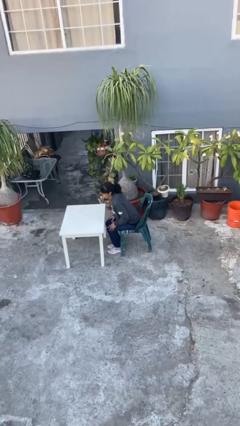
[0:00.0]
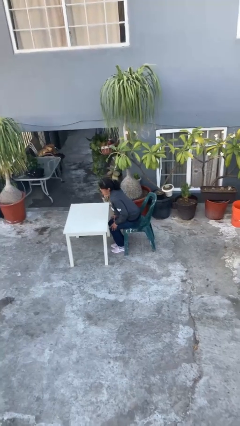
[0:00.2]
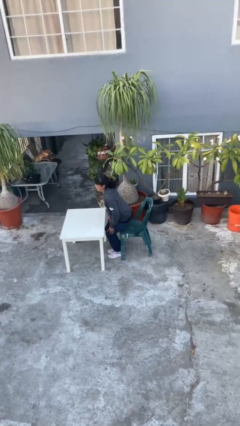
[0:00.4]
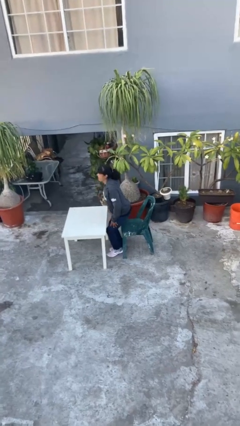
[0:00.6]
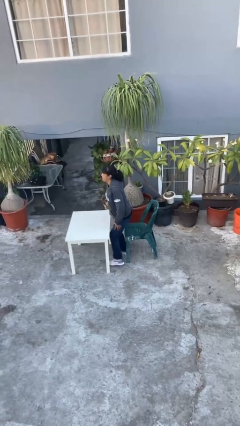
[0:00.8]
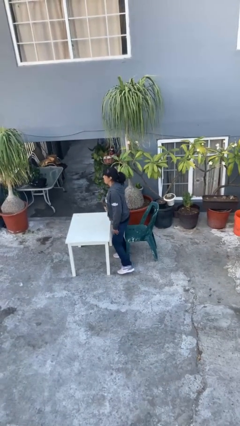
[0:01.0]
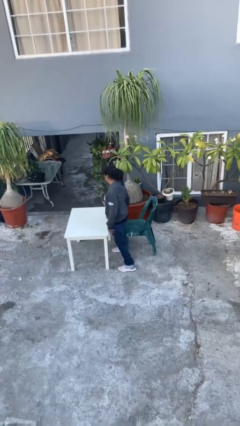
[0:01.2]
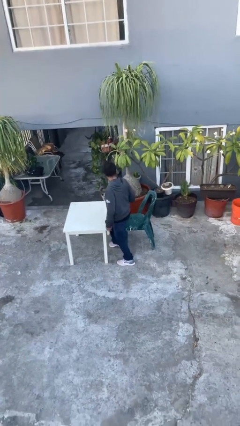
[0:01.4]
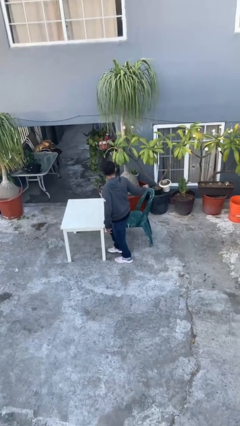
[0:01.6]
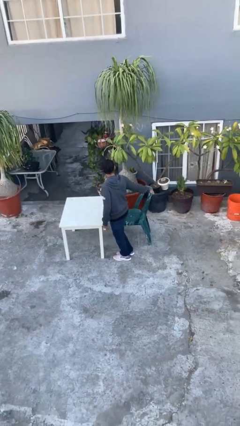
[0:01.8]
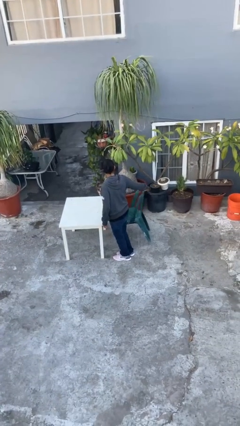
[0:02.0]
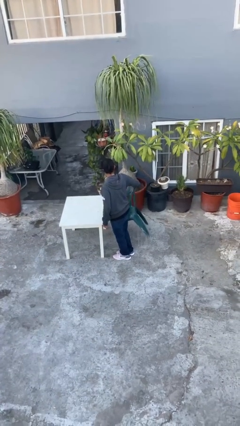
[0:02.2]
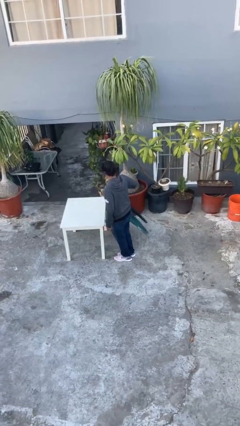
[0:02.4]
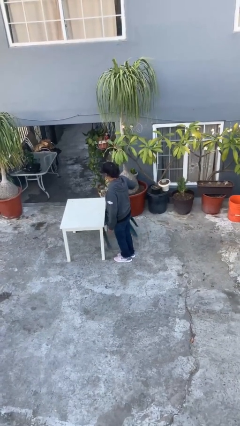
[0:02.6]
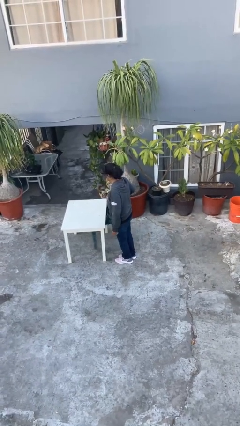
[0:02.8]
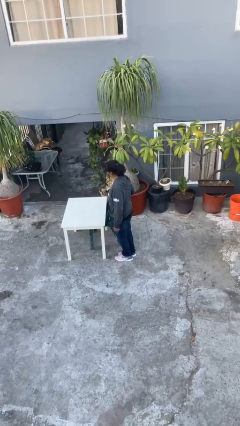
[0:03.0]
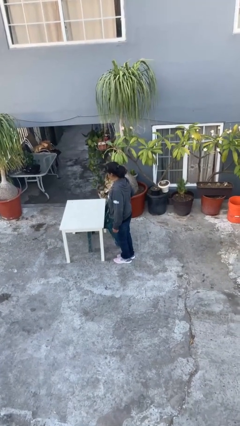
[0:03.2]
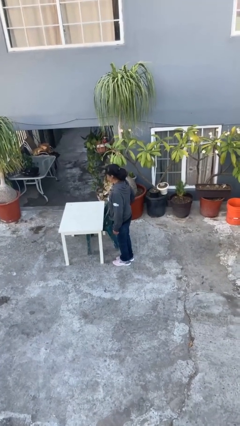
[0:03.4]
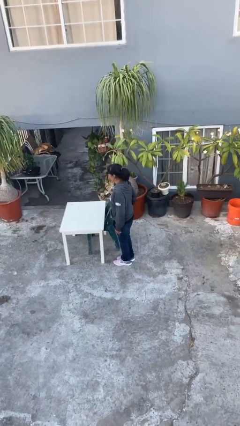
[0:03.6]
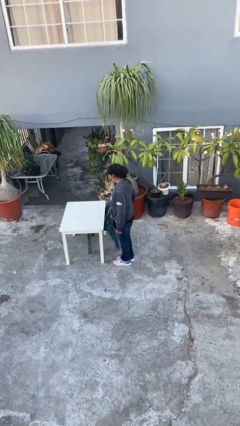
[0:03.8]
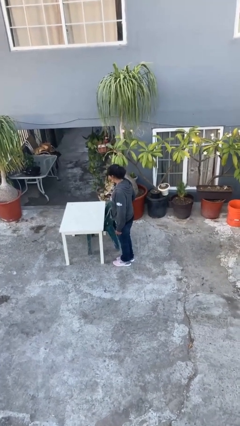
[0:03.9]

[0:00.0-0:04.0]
person stands up

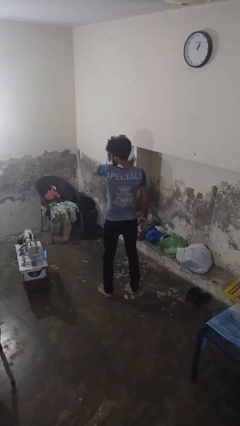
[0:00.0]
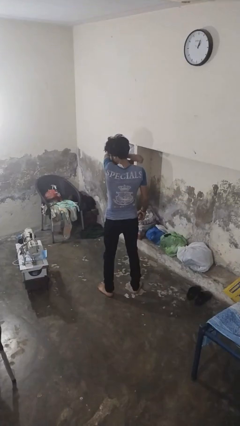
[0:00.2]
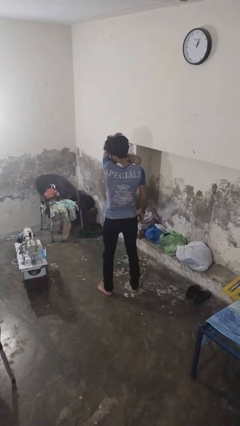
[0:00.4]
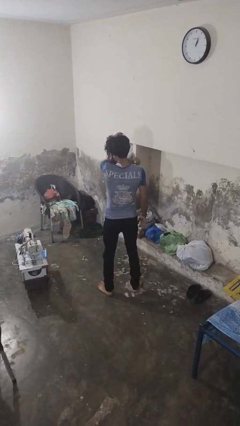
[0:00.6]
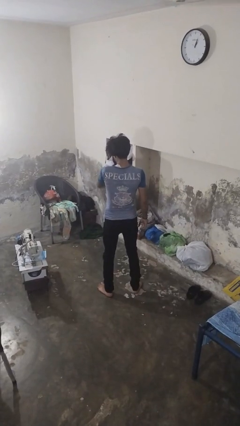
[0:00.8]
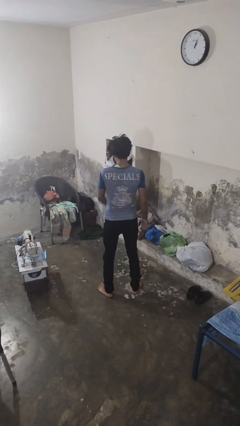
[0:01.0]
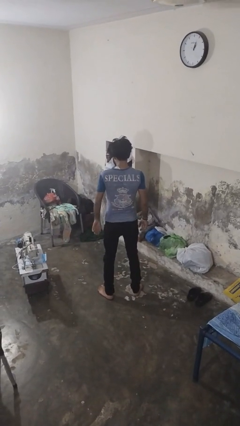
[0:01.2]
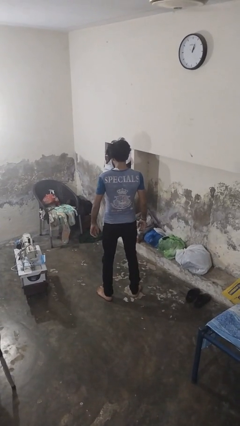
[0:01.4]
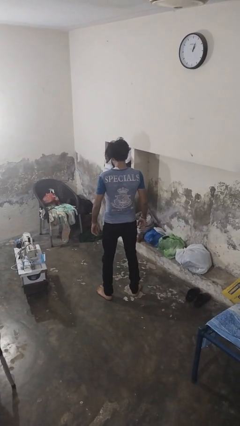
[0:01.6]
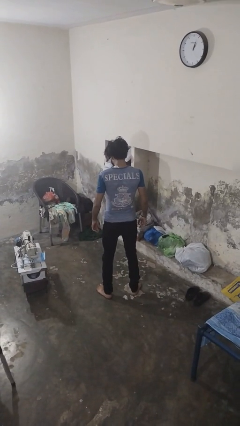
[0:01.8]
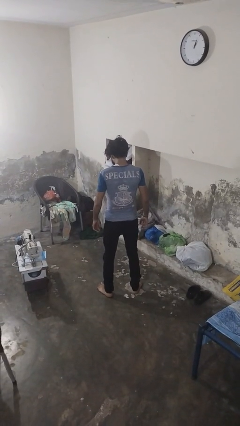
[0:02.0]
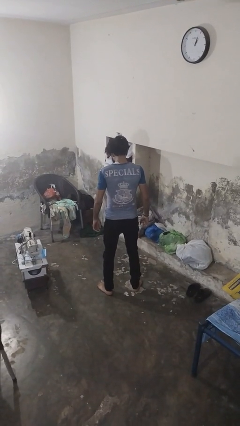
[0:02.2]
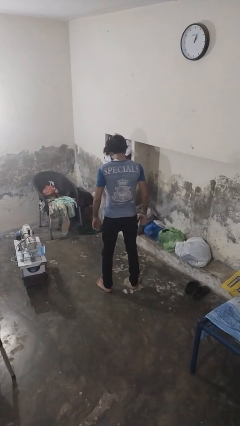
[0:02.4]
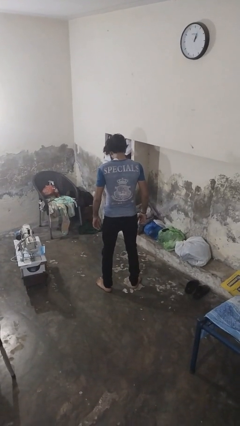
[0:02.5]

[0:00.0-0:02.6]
person sneezes into arm

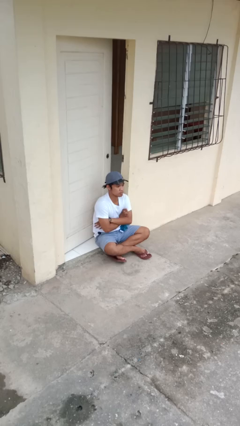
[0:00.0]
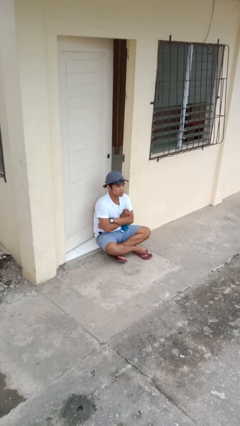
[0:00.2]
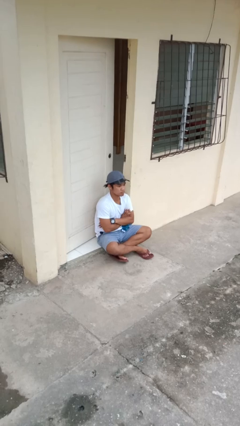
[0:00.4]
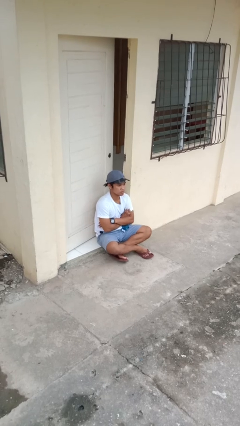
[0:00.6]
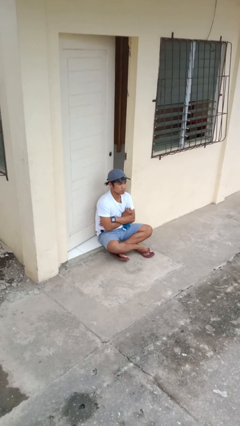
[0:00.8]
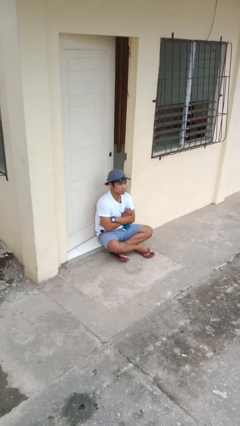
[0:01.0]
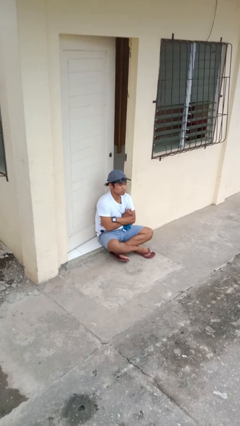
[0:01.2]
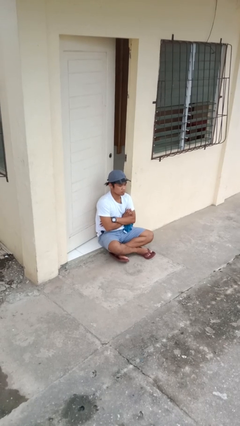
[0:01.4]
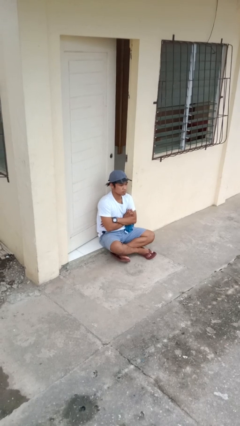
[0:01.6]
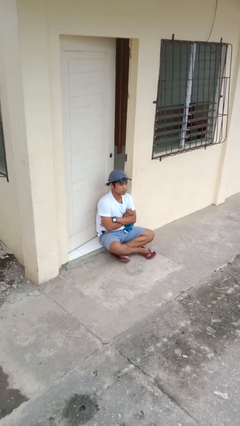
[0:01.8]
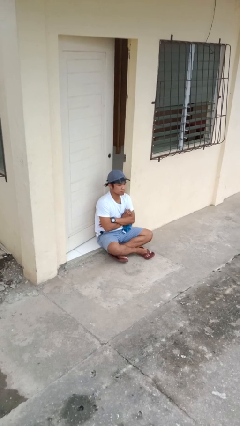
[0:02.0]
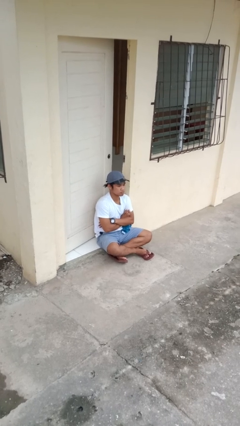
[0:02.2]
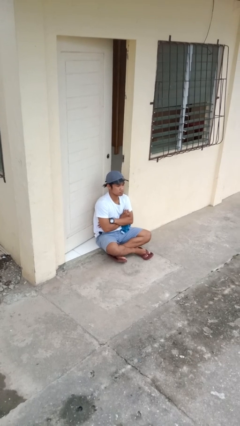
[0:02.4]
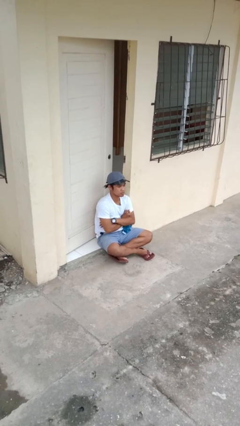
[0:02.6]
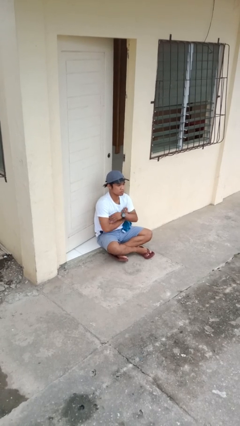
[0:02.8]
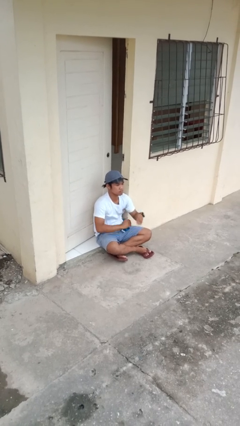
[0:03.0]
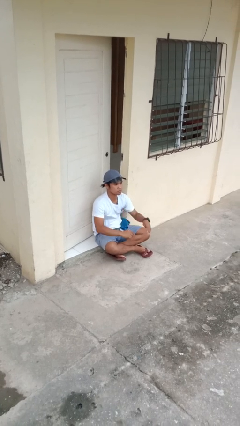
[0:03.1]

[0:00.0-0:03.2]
person crosses arms

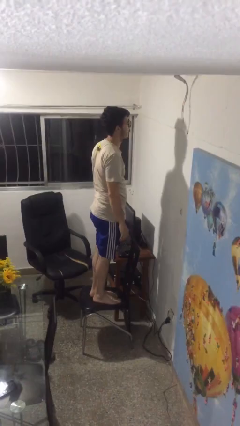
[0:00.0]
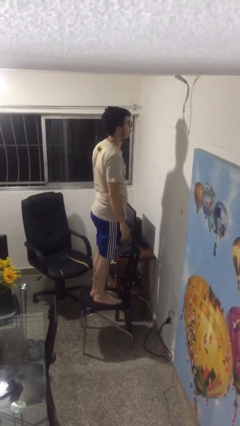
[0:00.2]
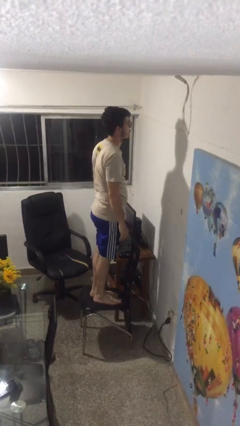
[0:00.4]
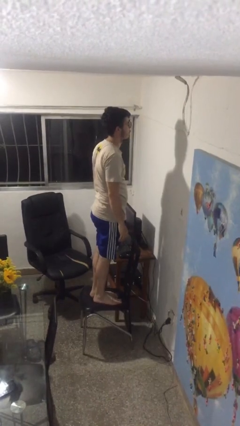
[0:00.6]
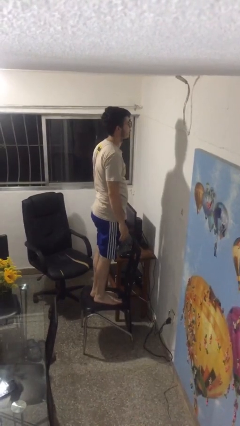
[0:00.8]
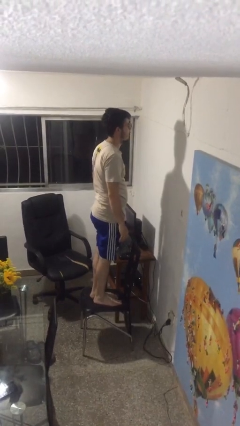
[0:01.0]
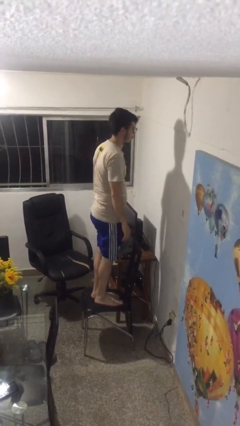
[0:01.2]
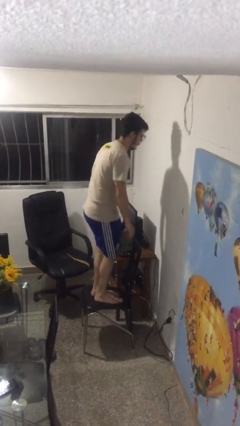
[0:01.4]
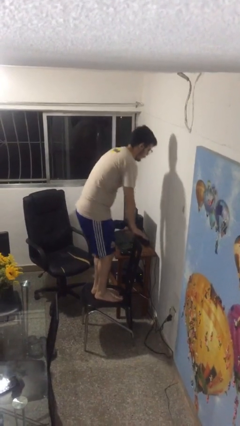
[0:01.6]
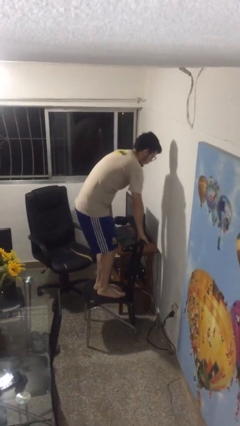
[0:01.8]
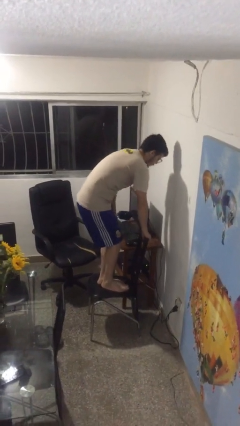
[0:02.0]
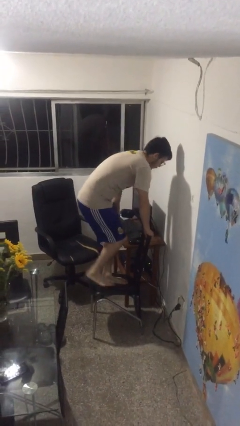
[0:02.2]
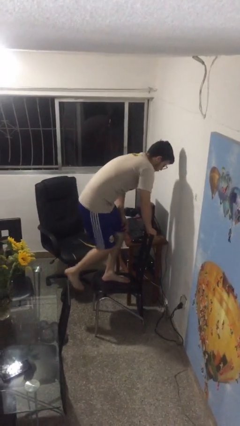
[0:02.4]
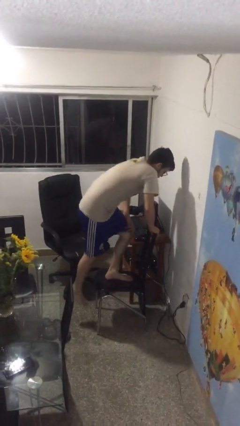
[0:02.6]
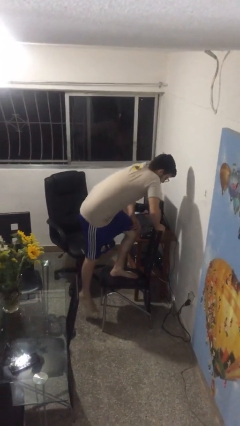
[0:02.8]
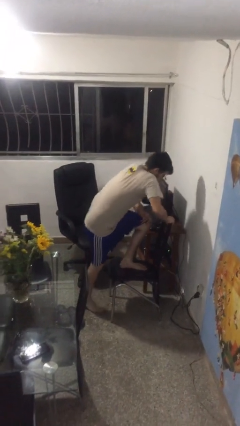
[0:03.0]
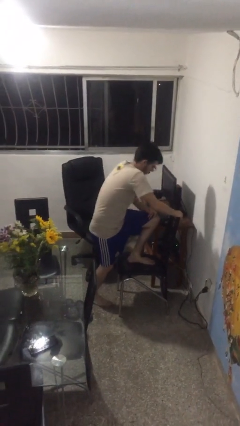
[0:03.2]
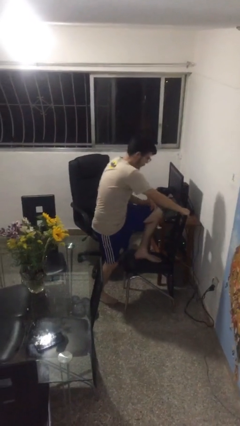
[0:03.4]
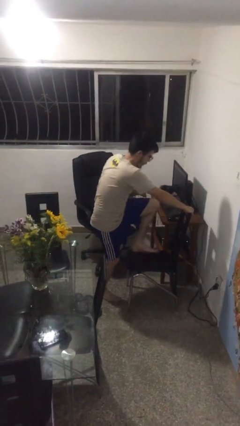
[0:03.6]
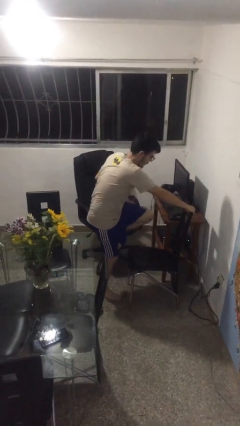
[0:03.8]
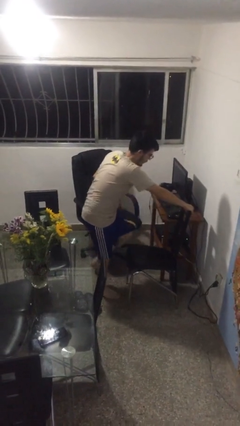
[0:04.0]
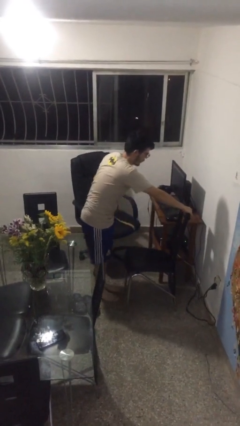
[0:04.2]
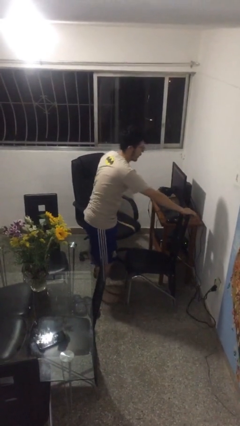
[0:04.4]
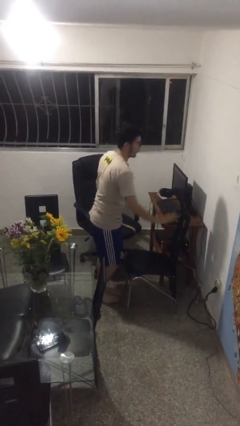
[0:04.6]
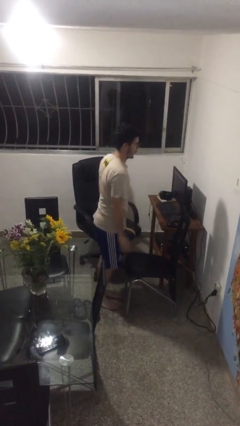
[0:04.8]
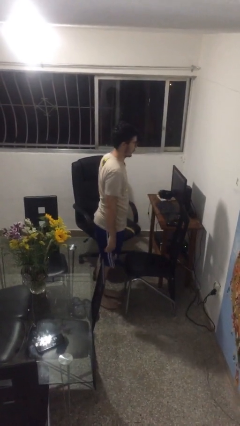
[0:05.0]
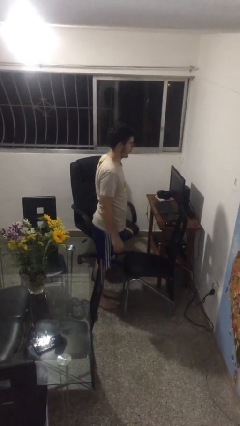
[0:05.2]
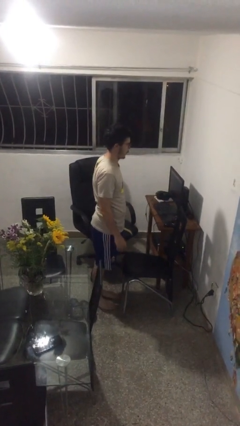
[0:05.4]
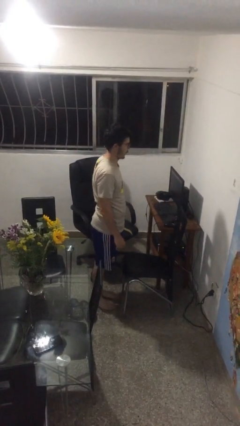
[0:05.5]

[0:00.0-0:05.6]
person climbs off chair

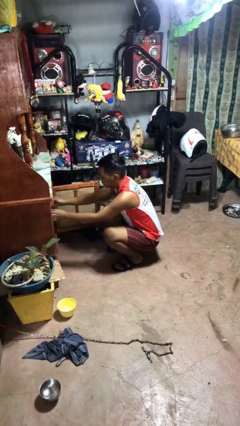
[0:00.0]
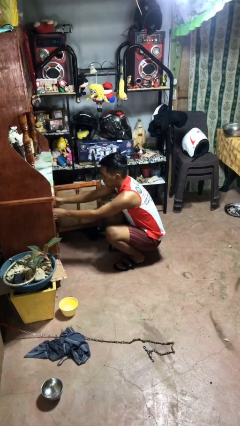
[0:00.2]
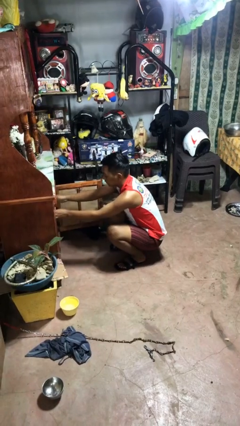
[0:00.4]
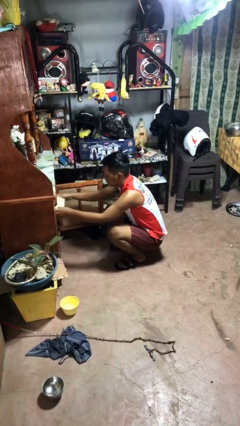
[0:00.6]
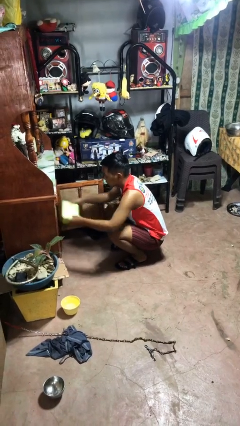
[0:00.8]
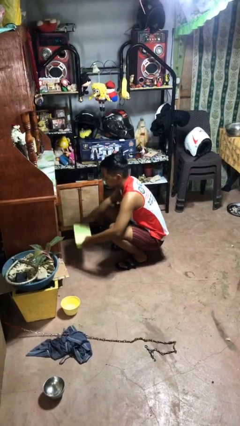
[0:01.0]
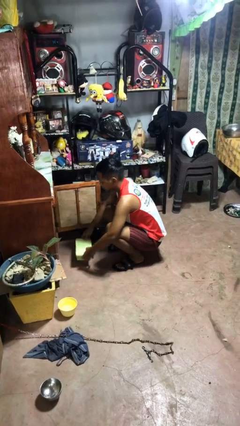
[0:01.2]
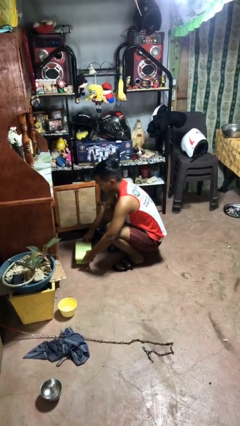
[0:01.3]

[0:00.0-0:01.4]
person takes object from cabinet

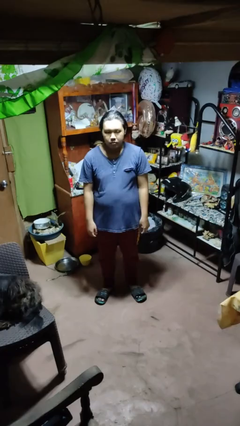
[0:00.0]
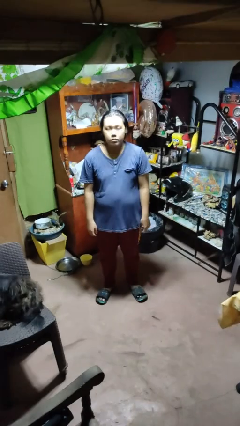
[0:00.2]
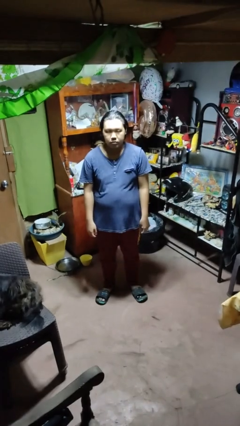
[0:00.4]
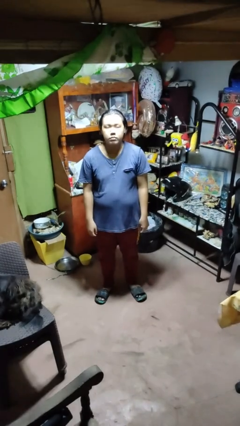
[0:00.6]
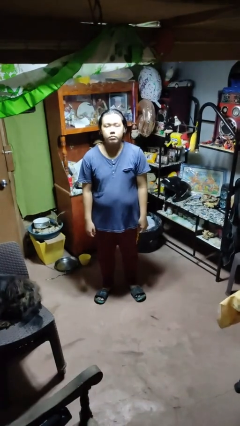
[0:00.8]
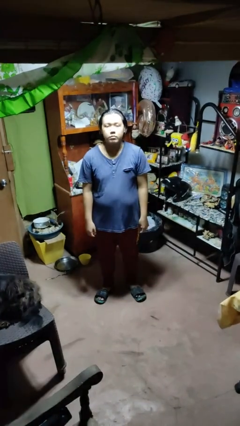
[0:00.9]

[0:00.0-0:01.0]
person nods head
